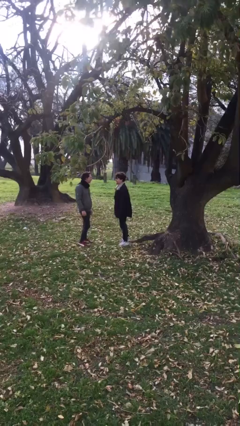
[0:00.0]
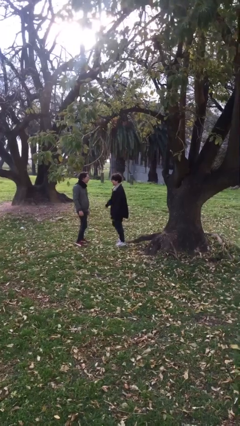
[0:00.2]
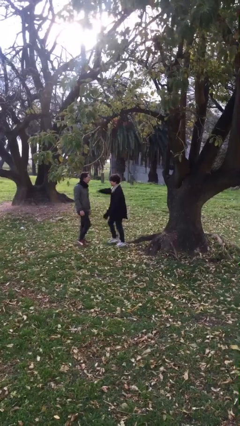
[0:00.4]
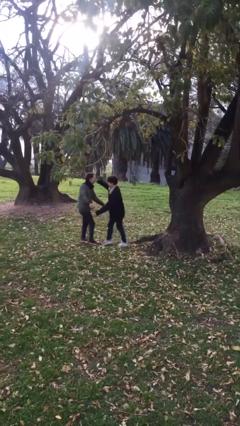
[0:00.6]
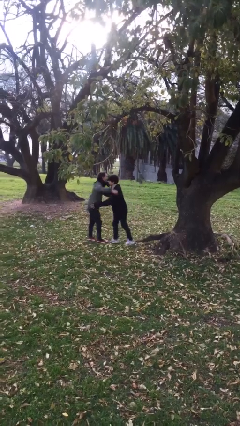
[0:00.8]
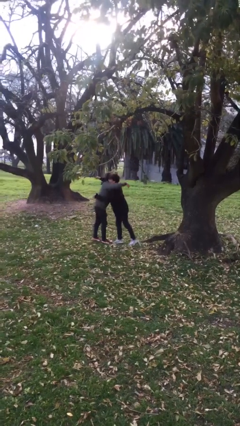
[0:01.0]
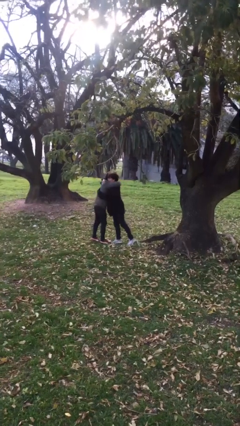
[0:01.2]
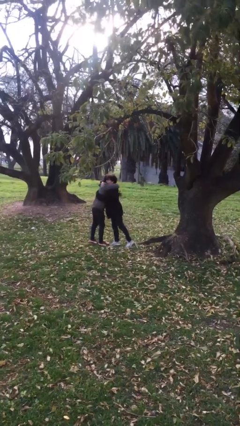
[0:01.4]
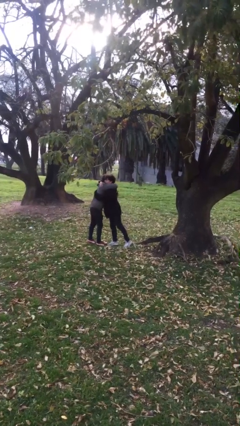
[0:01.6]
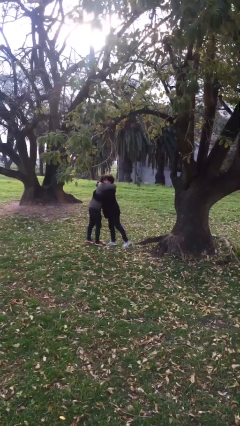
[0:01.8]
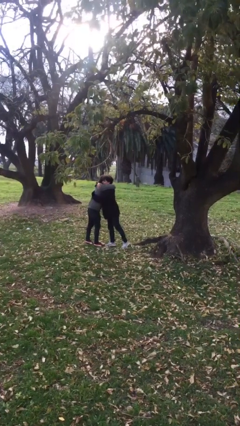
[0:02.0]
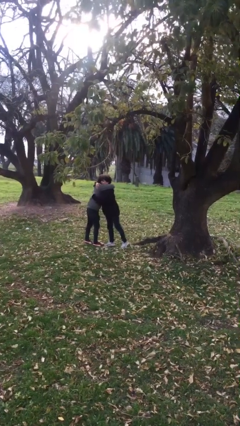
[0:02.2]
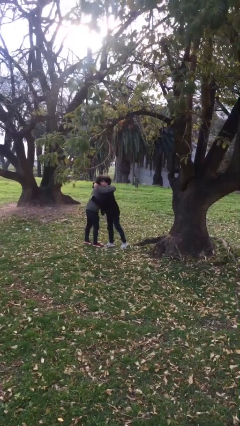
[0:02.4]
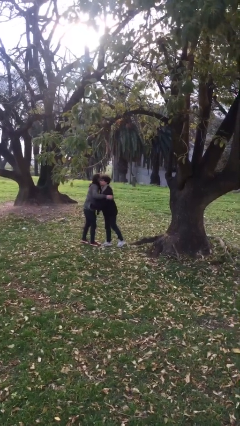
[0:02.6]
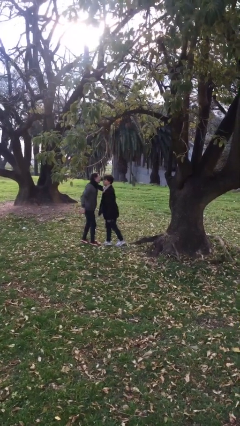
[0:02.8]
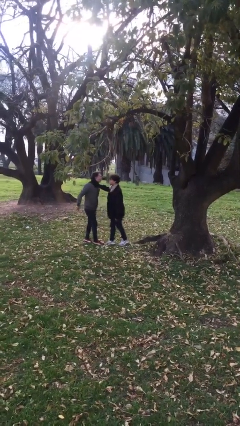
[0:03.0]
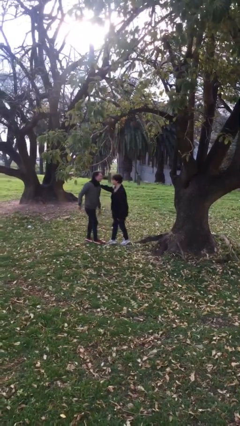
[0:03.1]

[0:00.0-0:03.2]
person embraces person

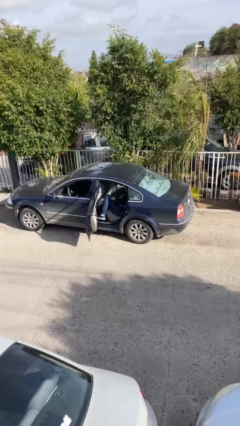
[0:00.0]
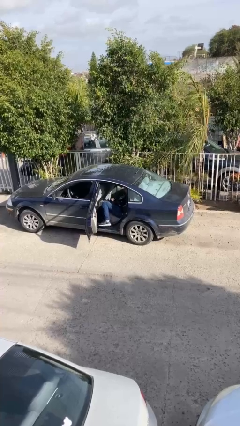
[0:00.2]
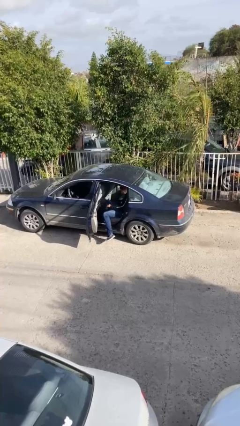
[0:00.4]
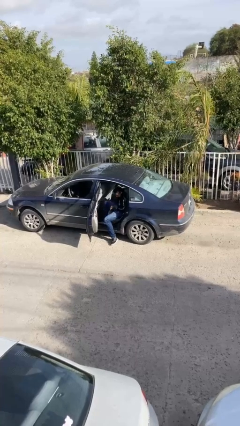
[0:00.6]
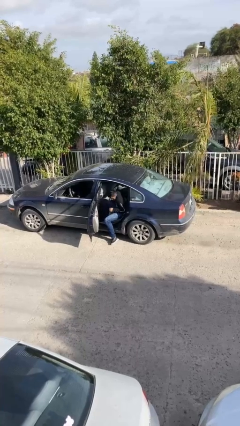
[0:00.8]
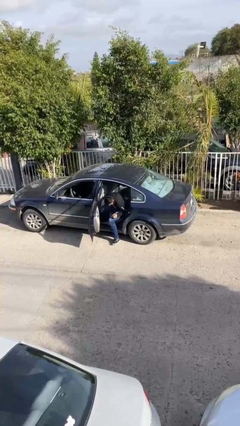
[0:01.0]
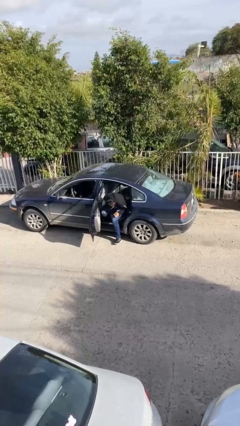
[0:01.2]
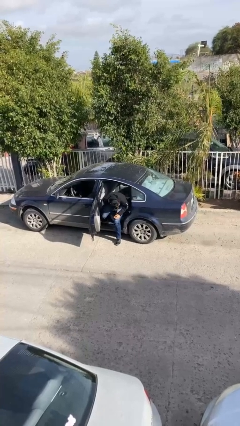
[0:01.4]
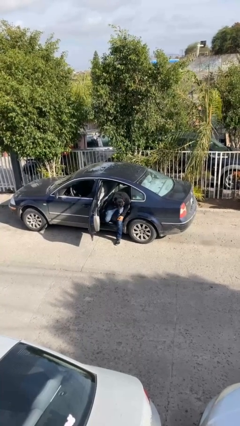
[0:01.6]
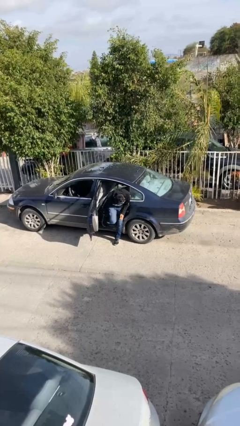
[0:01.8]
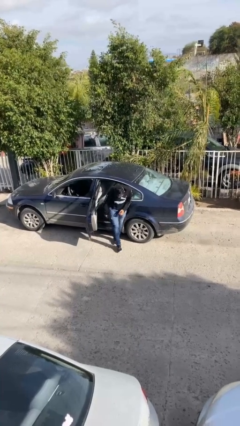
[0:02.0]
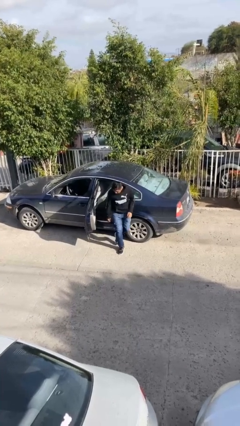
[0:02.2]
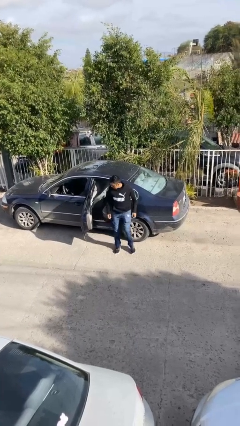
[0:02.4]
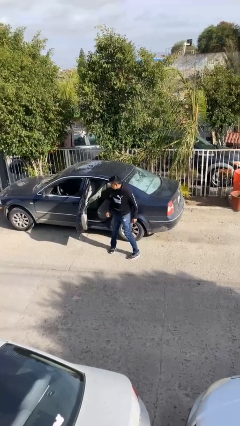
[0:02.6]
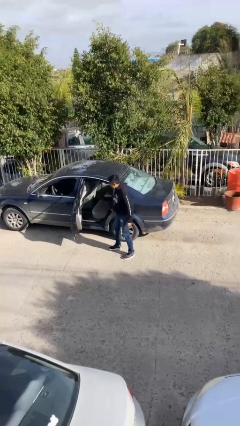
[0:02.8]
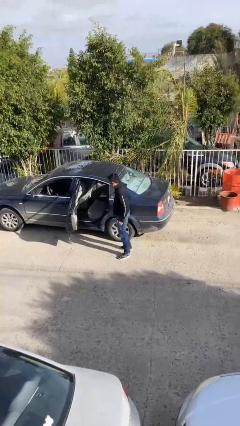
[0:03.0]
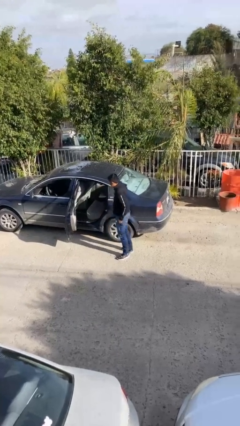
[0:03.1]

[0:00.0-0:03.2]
person exits car

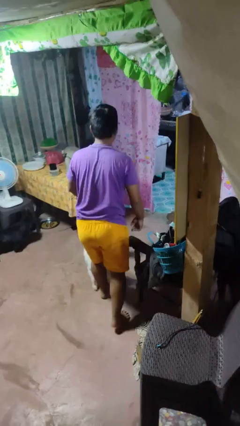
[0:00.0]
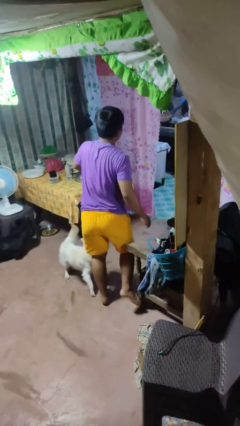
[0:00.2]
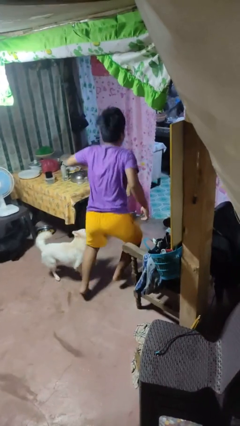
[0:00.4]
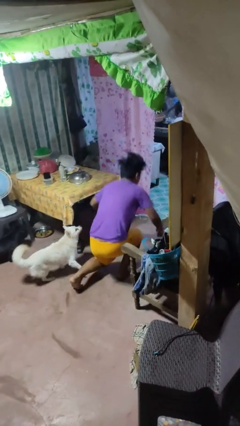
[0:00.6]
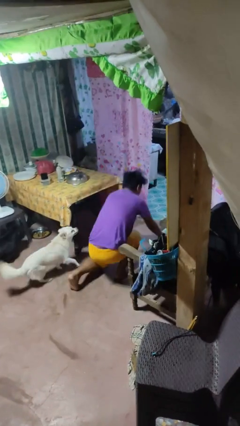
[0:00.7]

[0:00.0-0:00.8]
person trips on object on floor

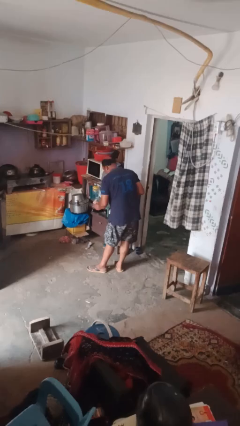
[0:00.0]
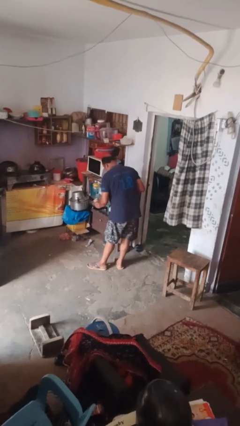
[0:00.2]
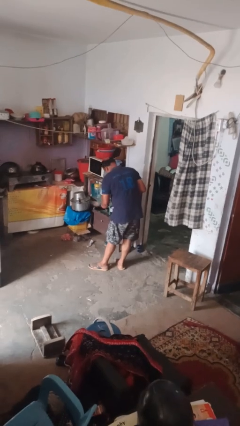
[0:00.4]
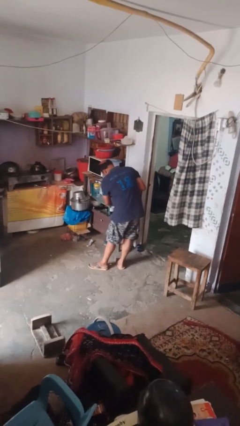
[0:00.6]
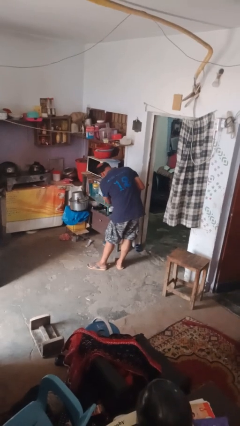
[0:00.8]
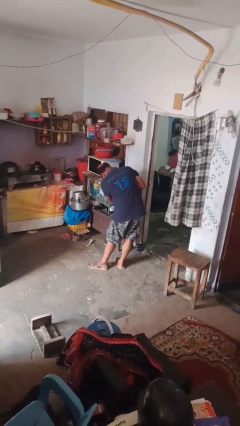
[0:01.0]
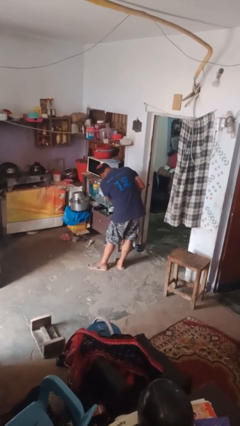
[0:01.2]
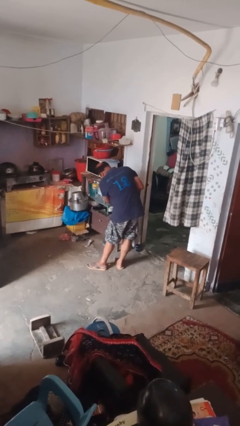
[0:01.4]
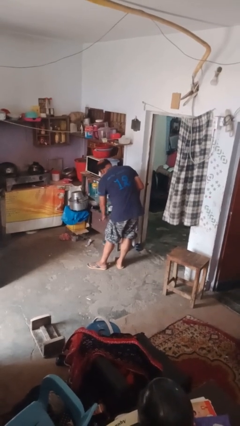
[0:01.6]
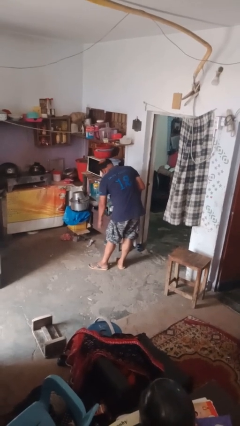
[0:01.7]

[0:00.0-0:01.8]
person puts object into kitchen drawer

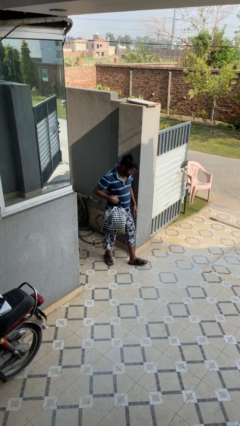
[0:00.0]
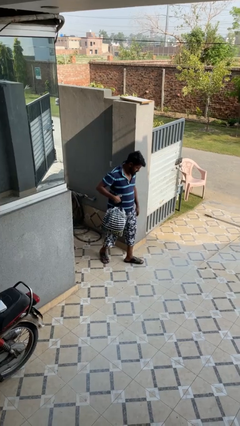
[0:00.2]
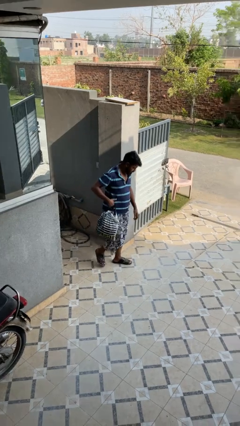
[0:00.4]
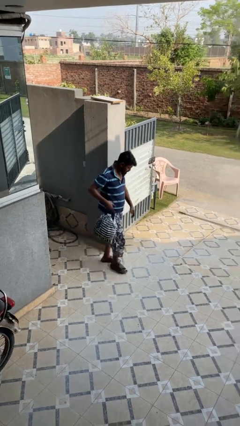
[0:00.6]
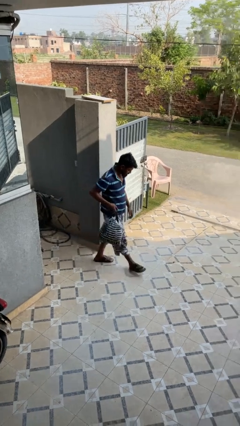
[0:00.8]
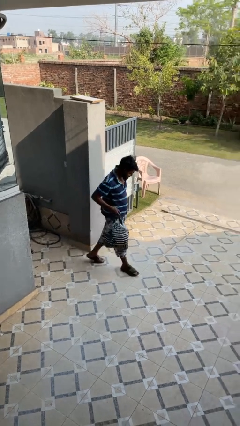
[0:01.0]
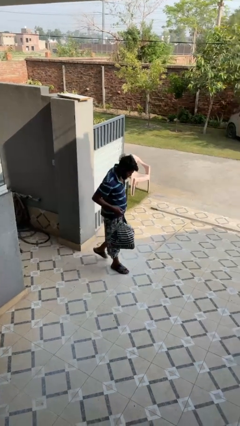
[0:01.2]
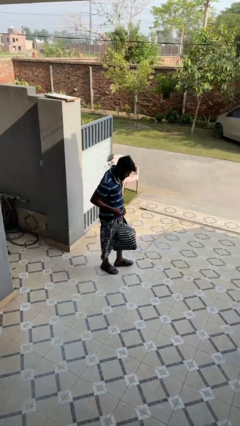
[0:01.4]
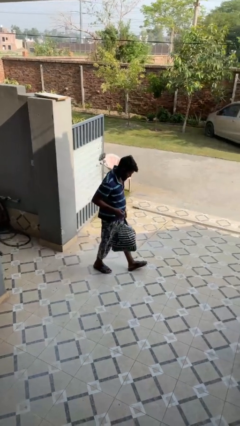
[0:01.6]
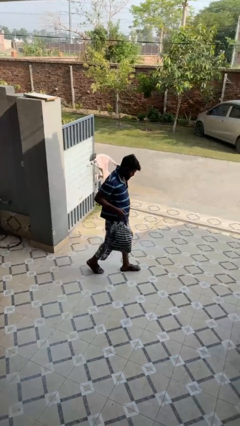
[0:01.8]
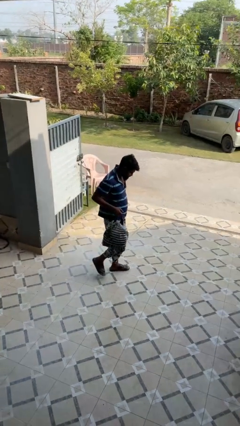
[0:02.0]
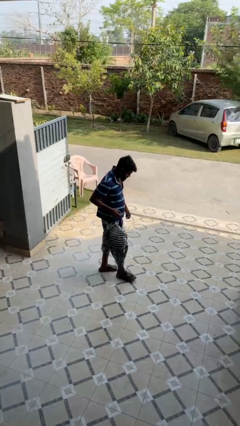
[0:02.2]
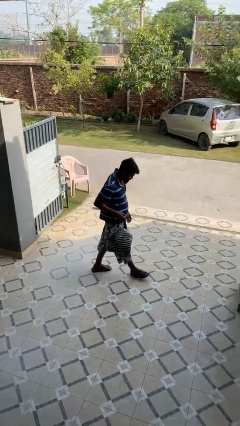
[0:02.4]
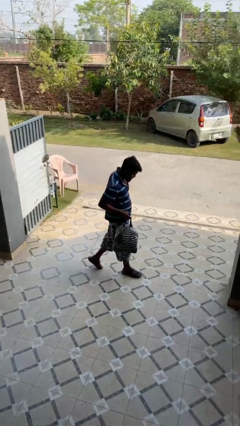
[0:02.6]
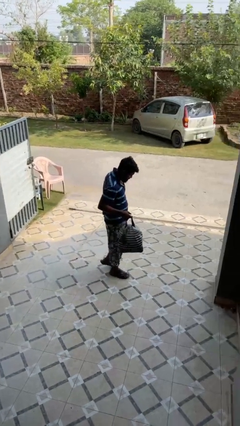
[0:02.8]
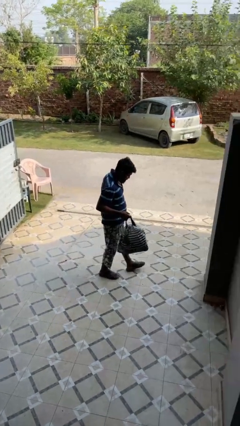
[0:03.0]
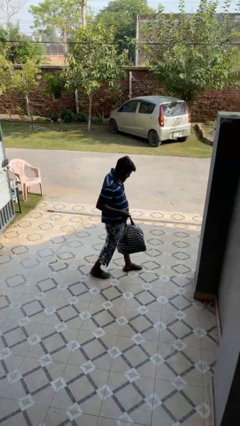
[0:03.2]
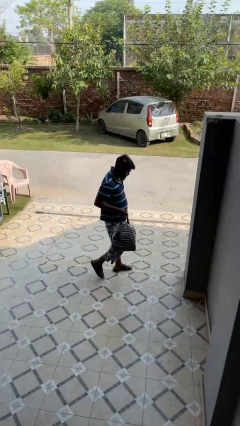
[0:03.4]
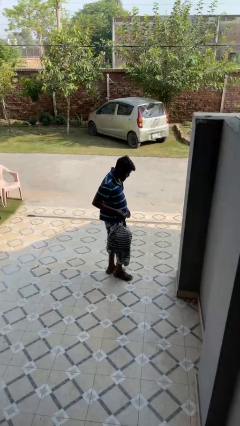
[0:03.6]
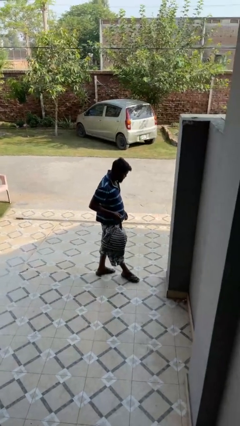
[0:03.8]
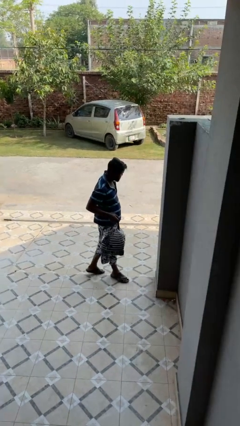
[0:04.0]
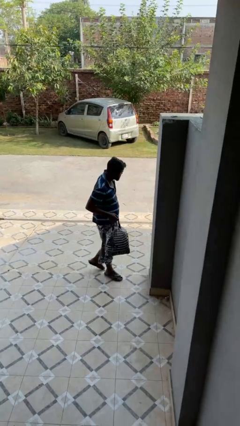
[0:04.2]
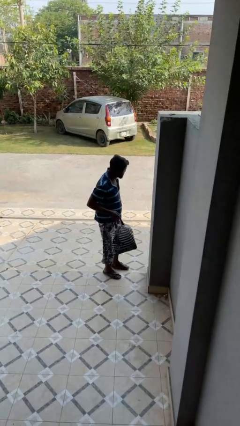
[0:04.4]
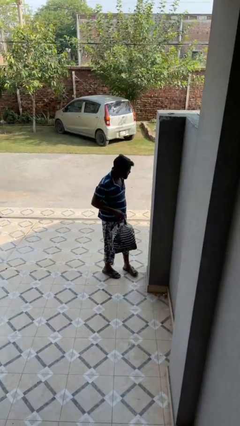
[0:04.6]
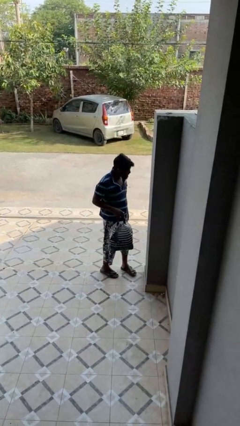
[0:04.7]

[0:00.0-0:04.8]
person carries groceries

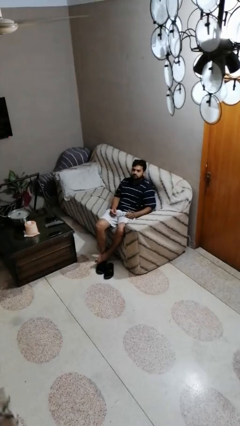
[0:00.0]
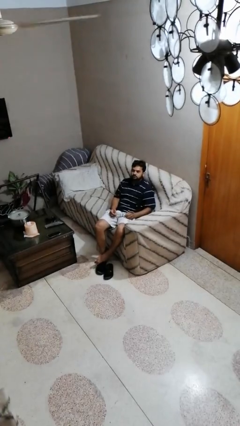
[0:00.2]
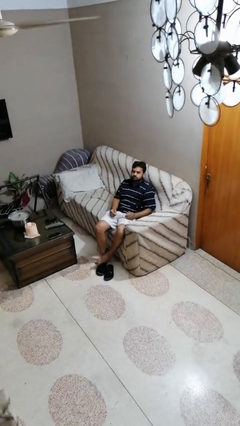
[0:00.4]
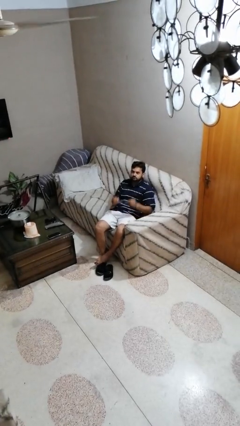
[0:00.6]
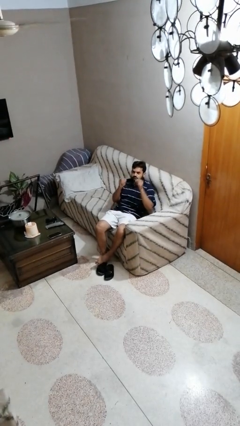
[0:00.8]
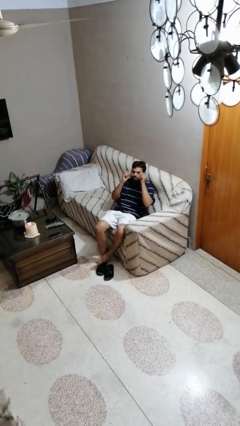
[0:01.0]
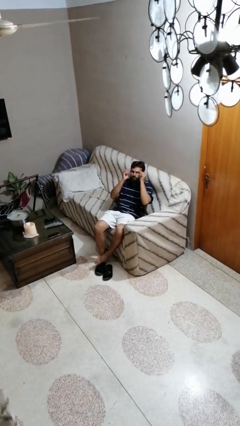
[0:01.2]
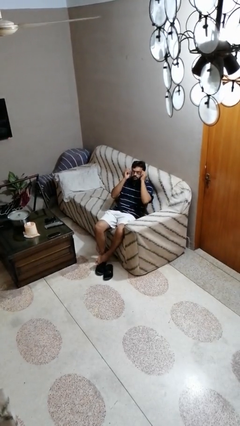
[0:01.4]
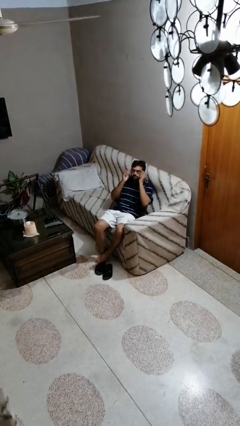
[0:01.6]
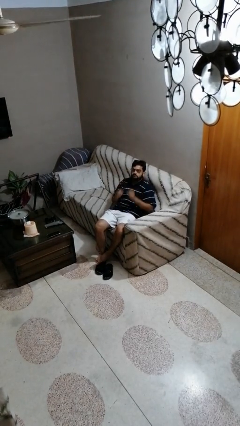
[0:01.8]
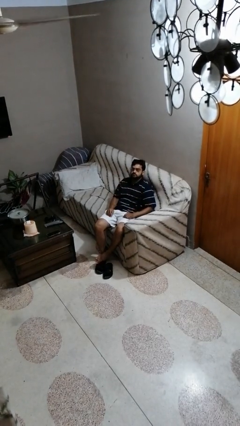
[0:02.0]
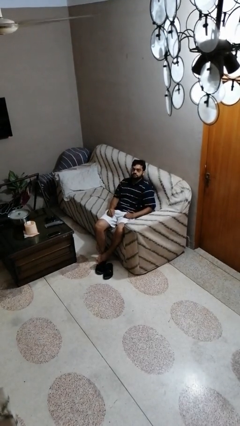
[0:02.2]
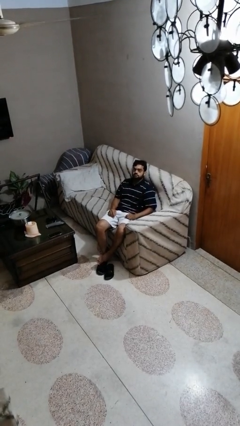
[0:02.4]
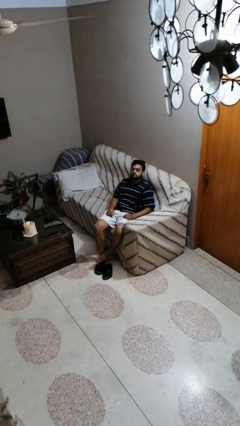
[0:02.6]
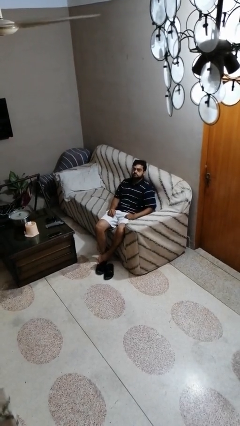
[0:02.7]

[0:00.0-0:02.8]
person puts on glasses

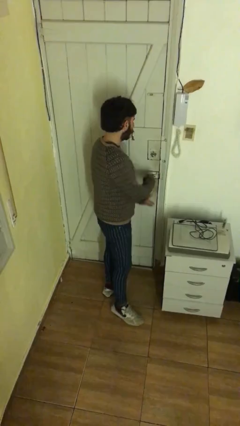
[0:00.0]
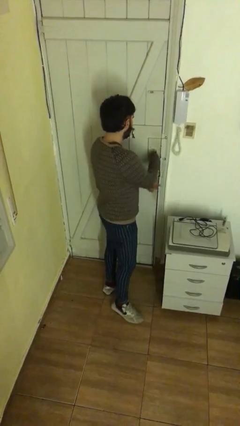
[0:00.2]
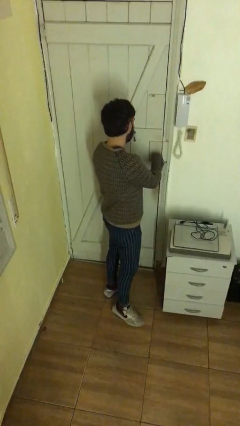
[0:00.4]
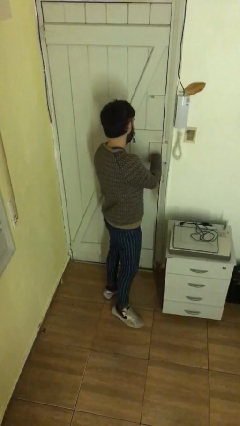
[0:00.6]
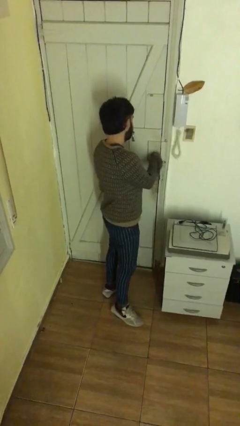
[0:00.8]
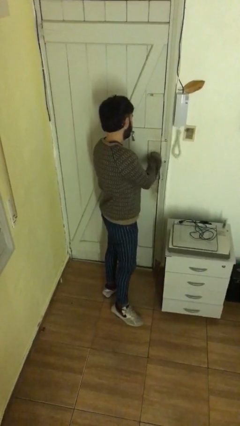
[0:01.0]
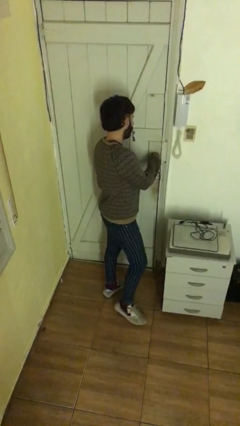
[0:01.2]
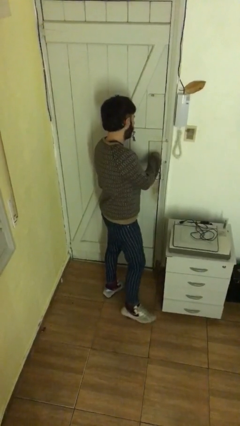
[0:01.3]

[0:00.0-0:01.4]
person unlocks door with keys
